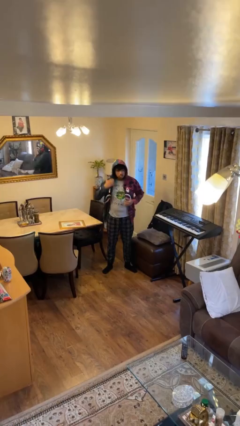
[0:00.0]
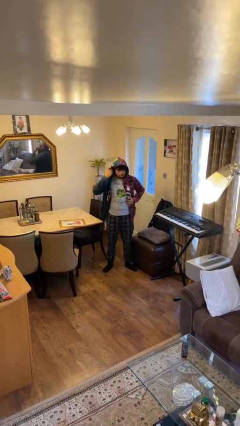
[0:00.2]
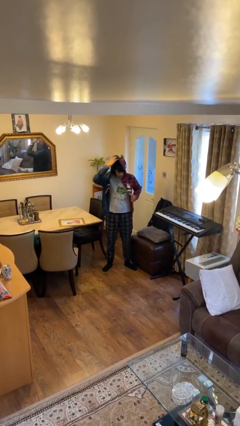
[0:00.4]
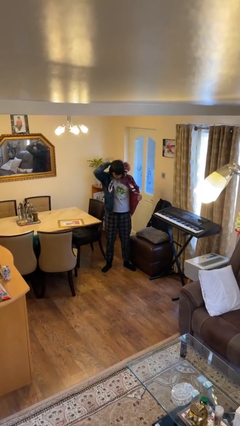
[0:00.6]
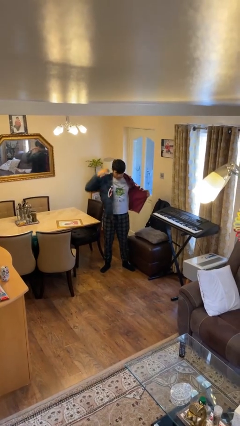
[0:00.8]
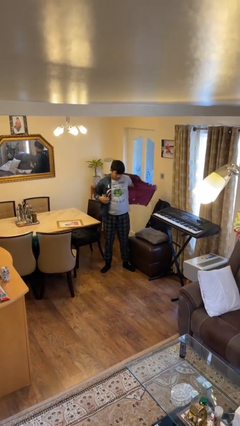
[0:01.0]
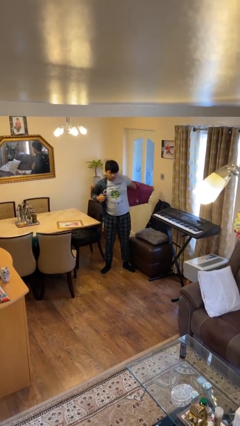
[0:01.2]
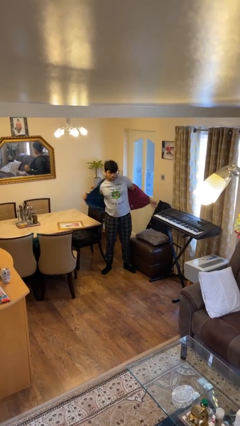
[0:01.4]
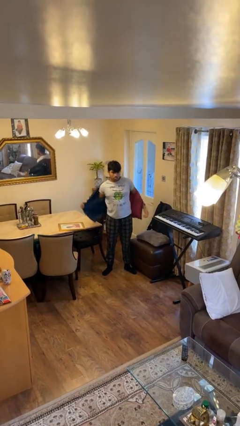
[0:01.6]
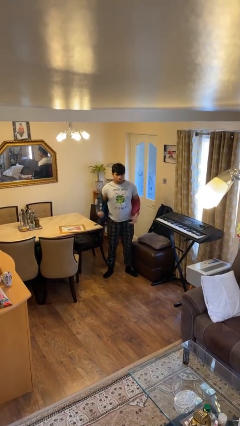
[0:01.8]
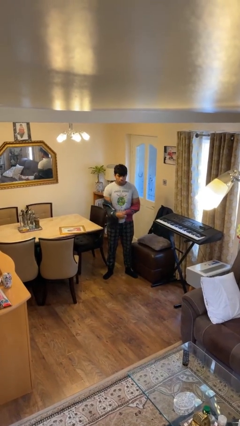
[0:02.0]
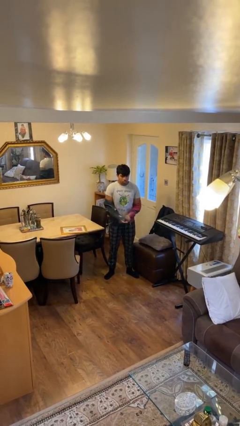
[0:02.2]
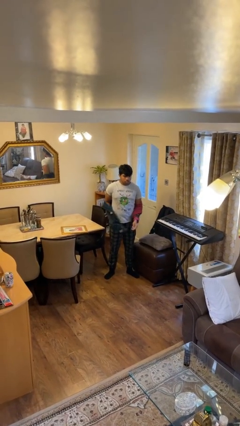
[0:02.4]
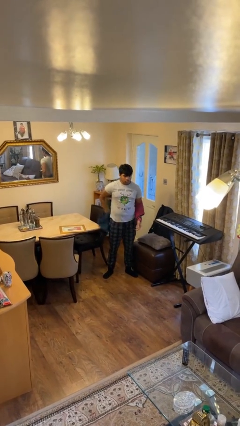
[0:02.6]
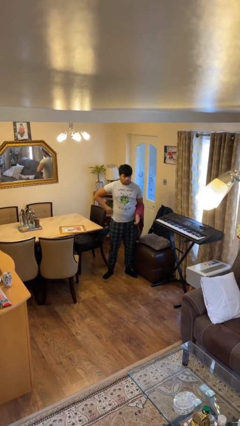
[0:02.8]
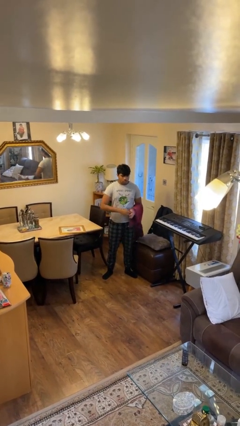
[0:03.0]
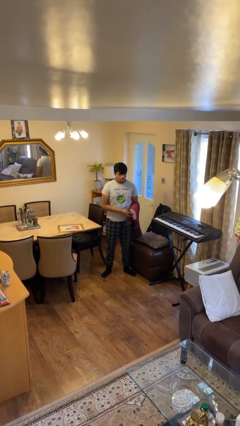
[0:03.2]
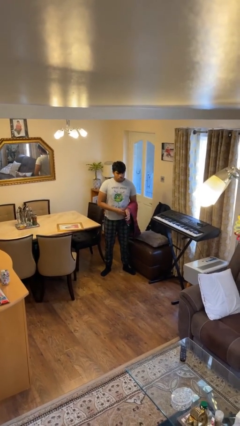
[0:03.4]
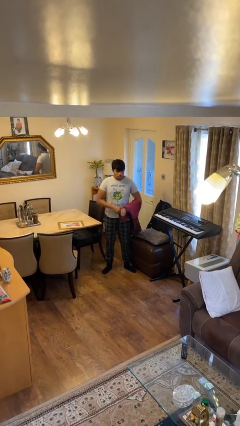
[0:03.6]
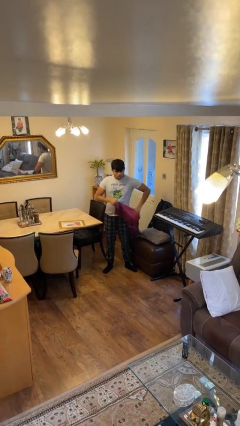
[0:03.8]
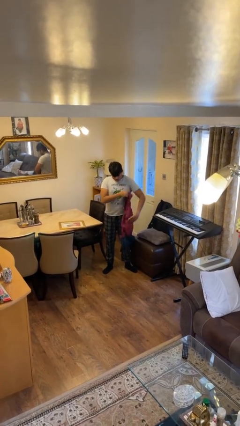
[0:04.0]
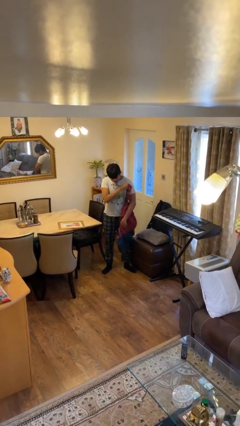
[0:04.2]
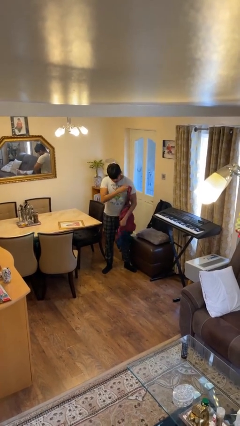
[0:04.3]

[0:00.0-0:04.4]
person takes off hoodie

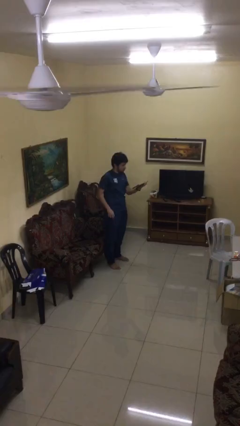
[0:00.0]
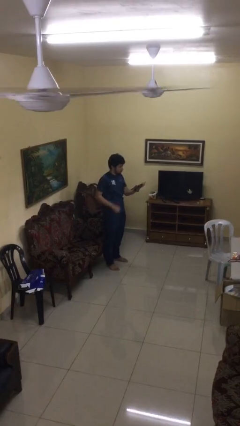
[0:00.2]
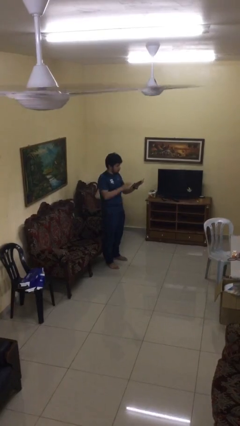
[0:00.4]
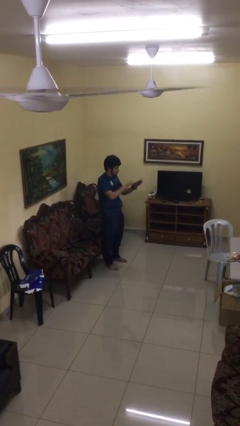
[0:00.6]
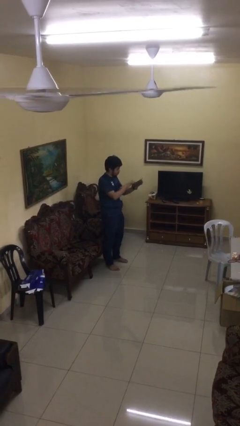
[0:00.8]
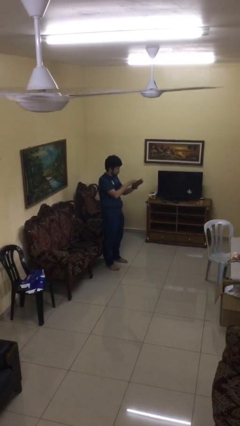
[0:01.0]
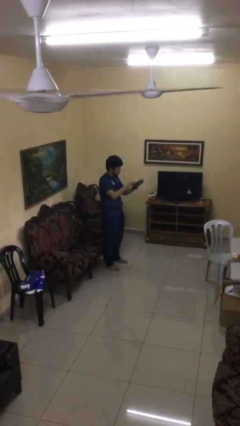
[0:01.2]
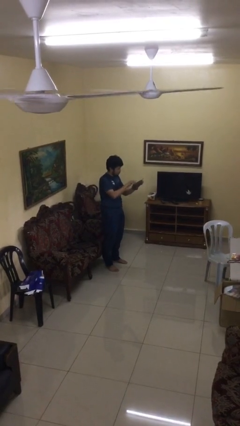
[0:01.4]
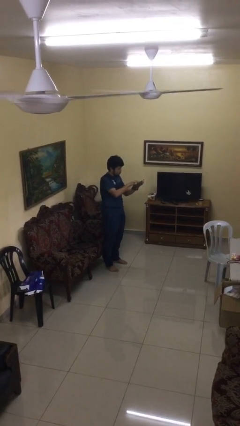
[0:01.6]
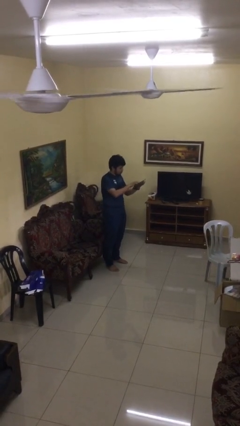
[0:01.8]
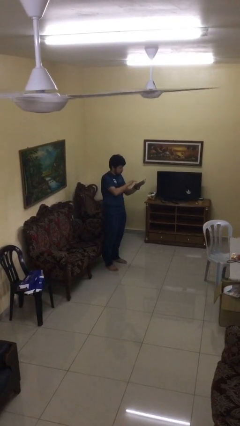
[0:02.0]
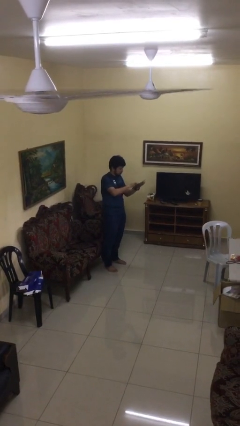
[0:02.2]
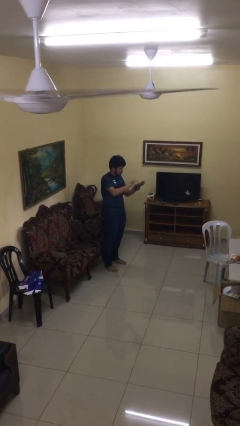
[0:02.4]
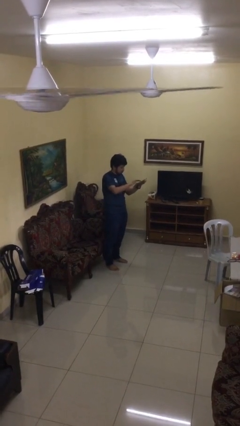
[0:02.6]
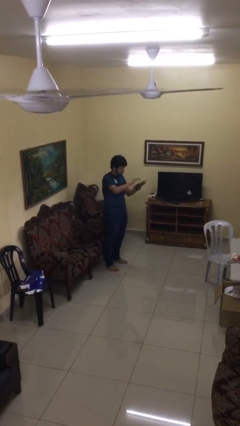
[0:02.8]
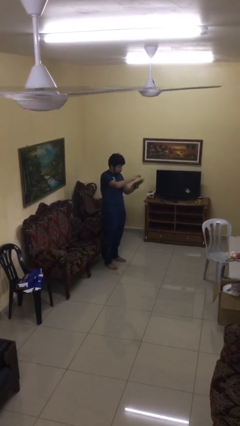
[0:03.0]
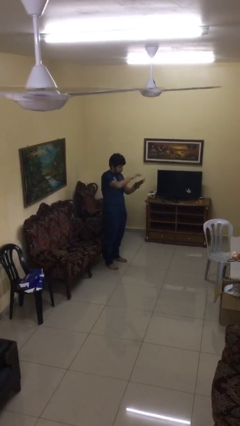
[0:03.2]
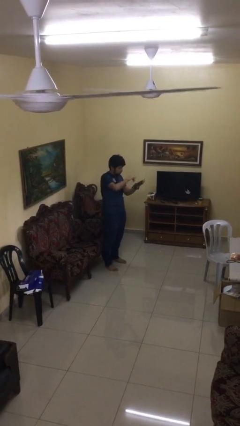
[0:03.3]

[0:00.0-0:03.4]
person interacts with tablet

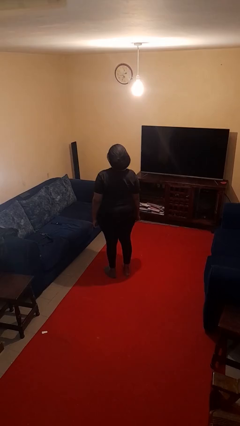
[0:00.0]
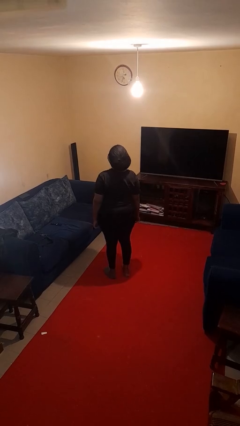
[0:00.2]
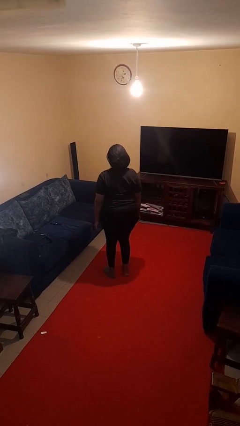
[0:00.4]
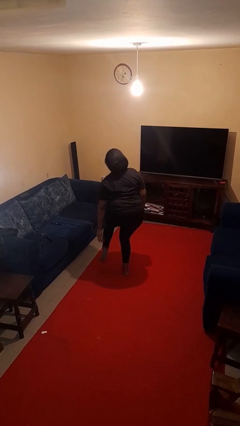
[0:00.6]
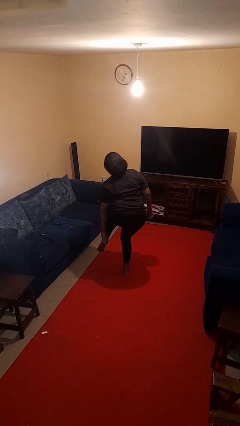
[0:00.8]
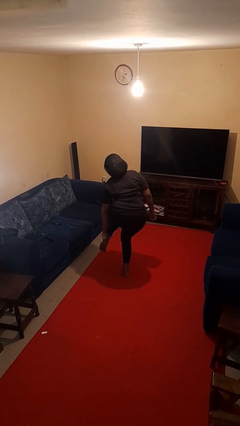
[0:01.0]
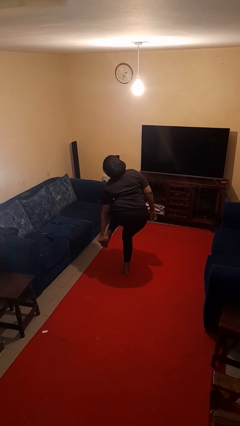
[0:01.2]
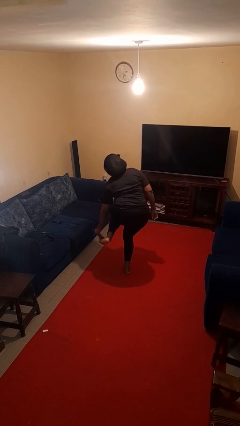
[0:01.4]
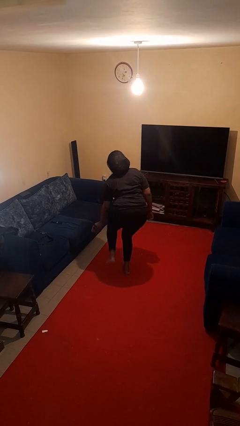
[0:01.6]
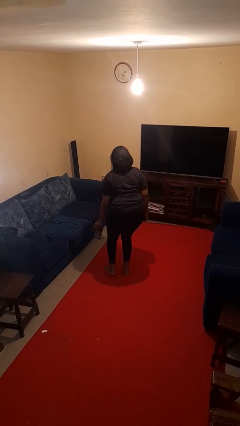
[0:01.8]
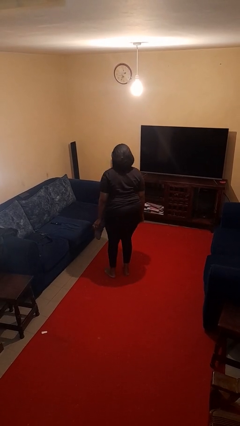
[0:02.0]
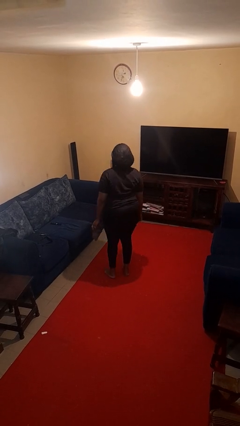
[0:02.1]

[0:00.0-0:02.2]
person takes off socks

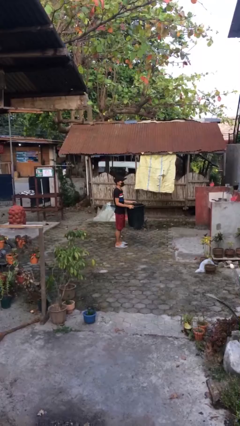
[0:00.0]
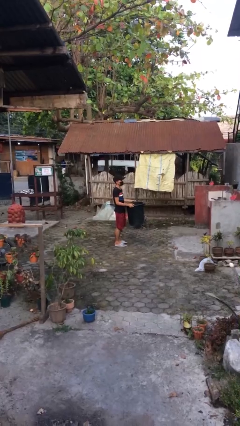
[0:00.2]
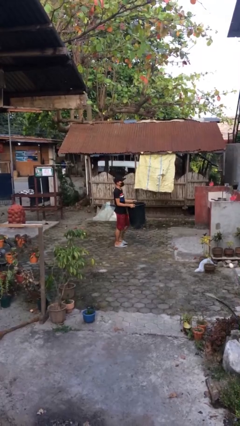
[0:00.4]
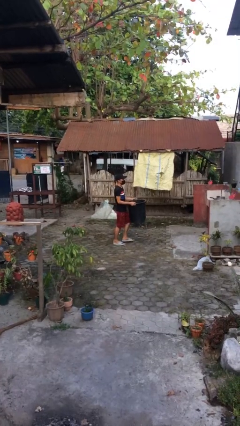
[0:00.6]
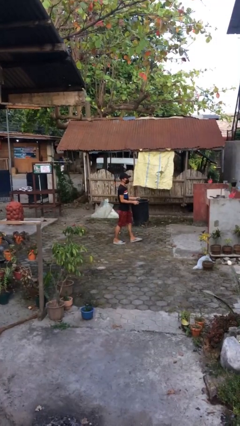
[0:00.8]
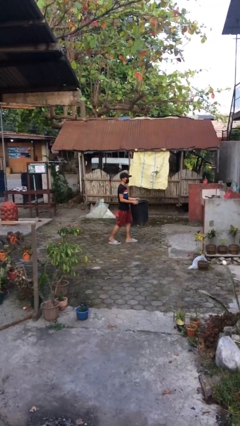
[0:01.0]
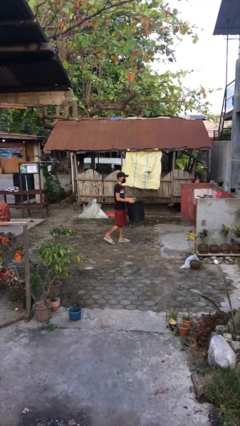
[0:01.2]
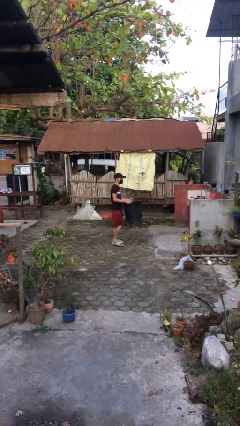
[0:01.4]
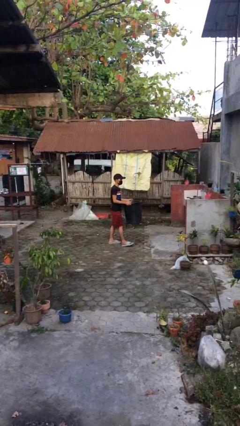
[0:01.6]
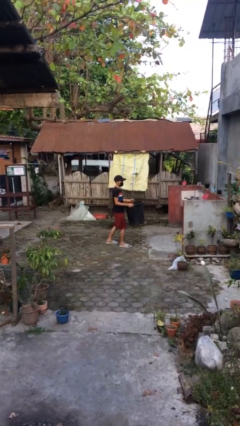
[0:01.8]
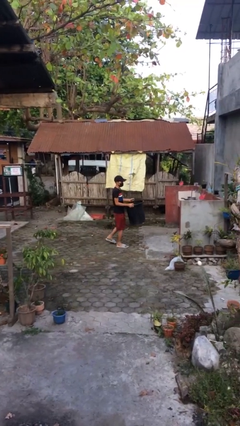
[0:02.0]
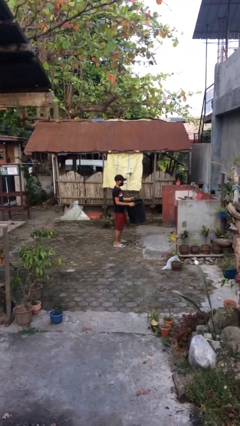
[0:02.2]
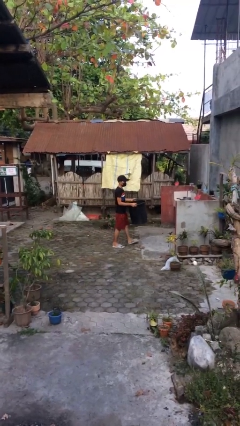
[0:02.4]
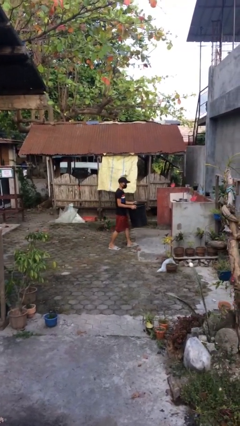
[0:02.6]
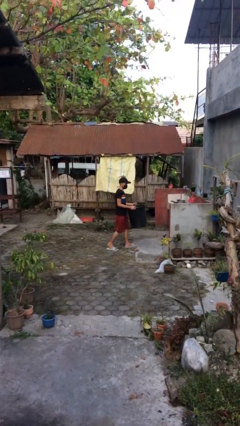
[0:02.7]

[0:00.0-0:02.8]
person carries heavy object

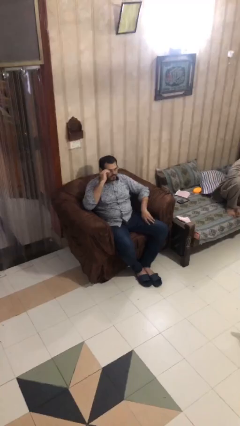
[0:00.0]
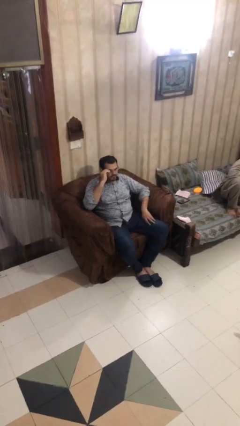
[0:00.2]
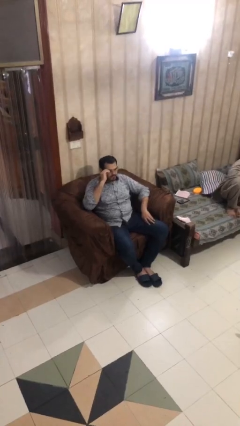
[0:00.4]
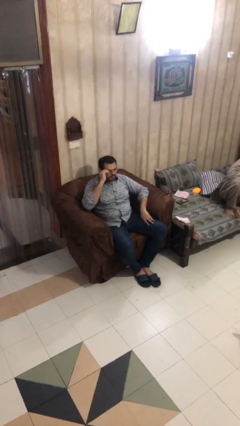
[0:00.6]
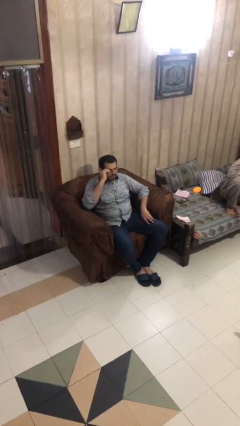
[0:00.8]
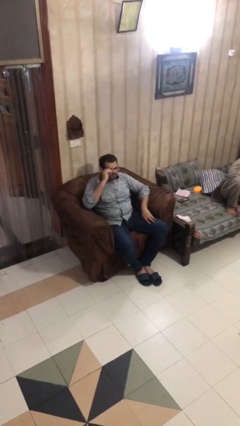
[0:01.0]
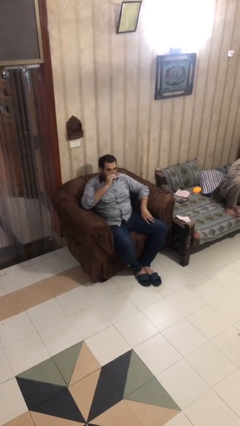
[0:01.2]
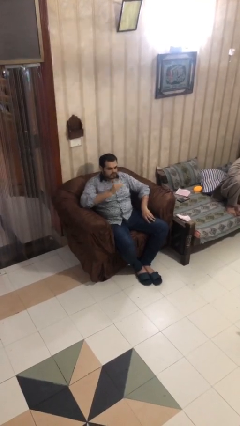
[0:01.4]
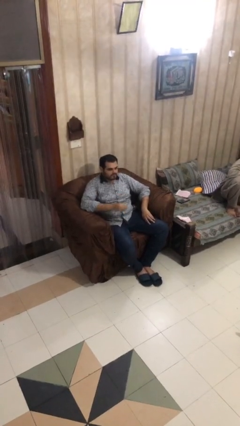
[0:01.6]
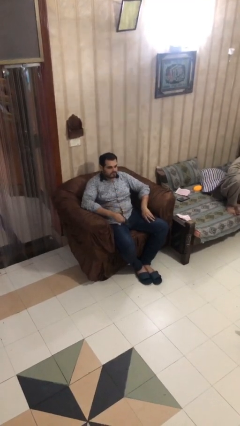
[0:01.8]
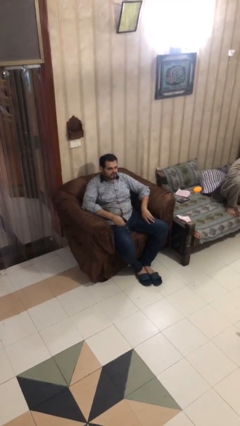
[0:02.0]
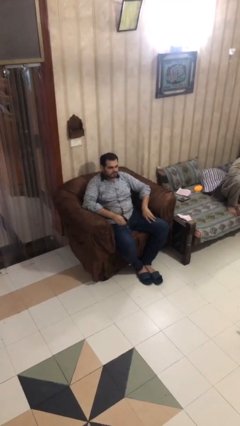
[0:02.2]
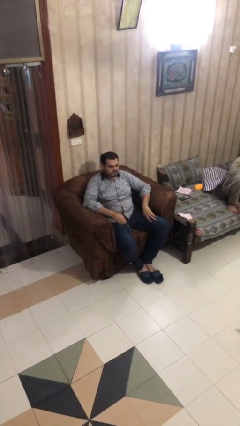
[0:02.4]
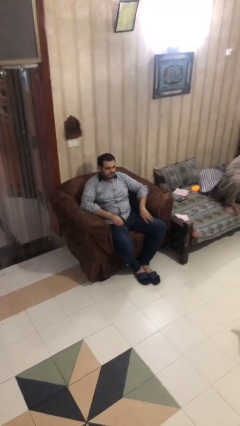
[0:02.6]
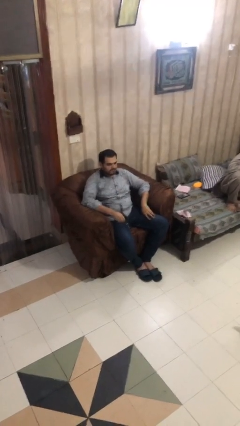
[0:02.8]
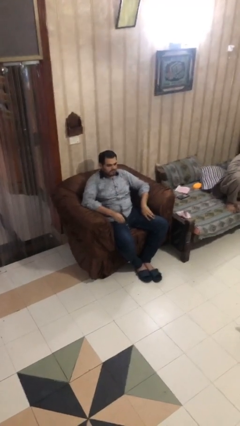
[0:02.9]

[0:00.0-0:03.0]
person takes off glasses

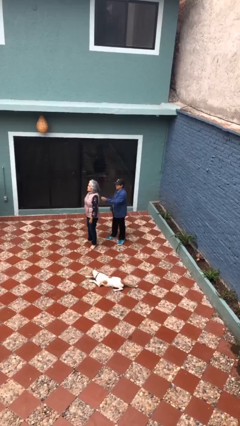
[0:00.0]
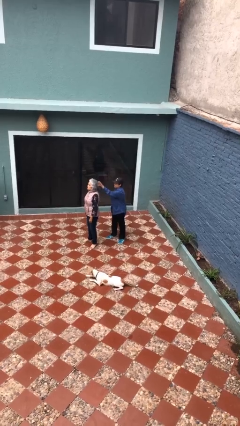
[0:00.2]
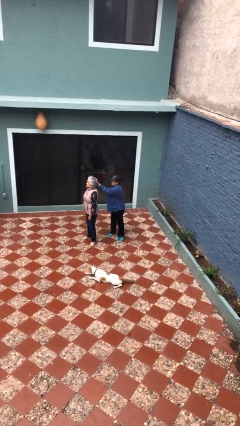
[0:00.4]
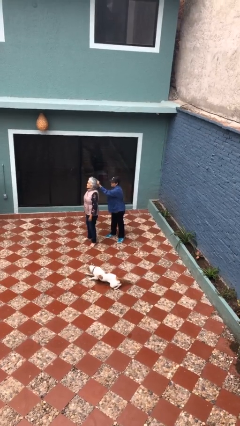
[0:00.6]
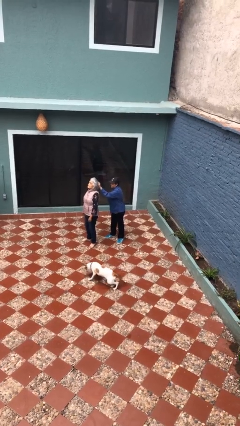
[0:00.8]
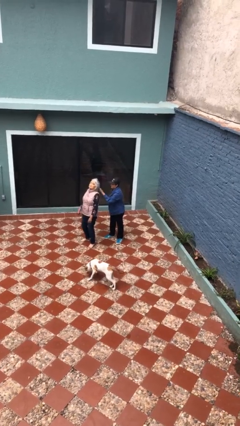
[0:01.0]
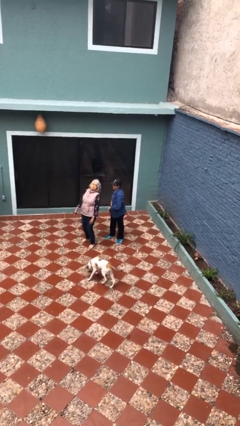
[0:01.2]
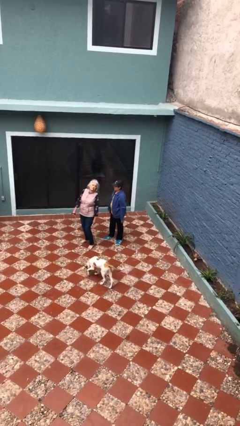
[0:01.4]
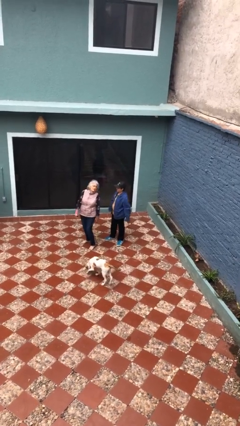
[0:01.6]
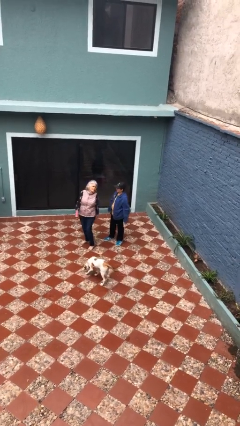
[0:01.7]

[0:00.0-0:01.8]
person grabs person by hair
